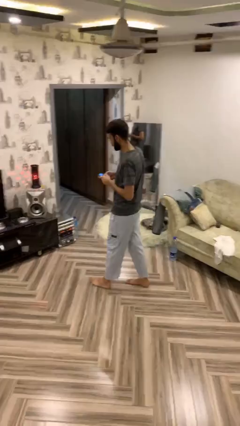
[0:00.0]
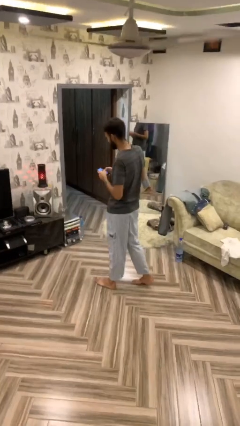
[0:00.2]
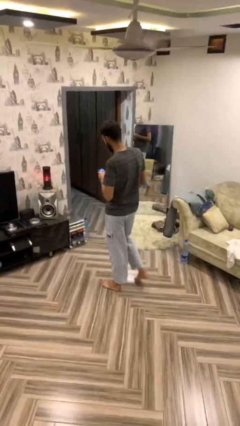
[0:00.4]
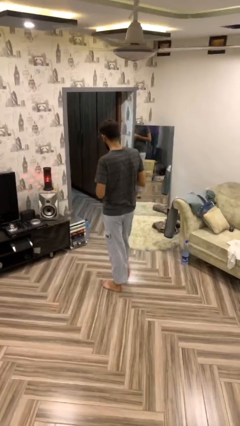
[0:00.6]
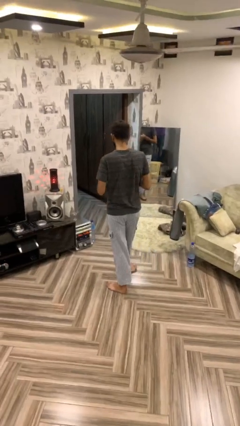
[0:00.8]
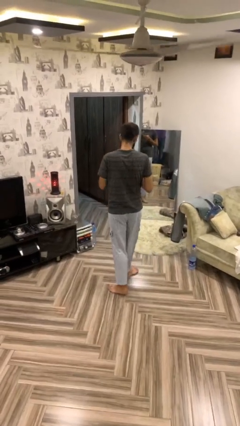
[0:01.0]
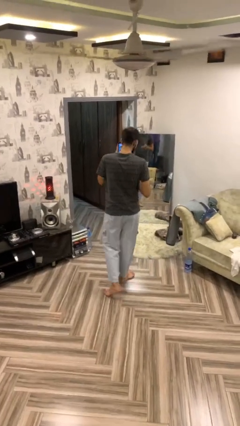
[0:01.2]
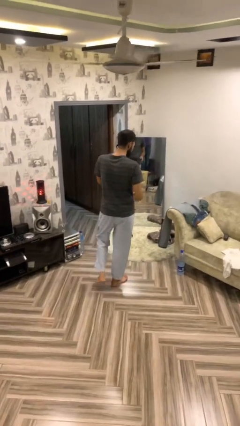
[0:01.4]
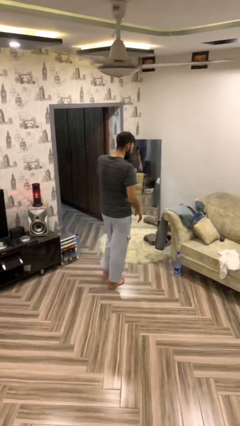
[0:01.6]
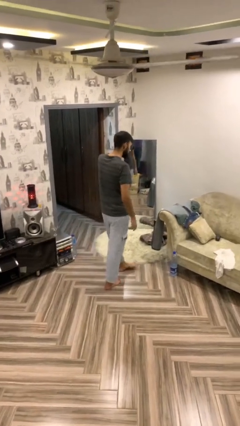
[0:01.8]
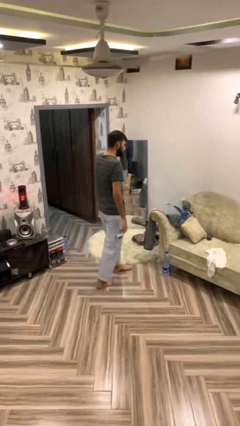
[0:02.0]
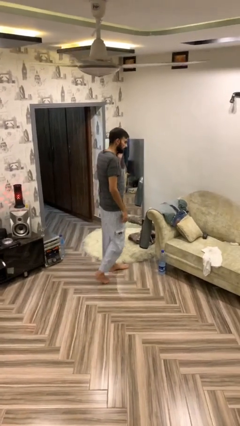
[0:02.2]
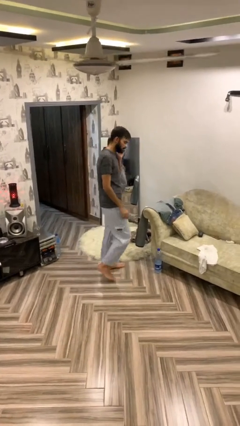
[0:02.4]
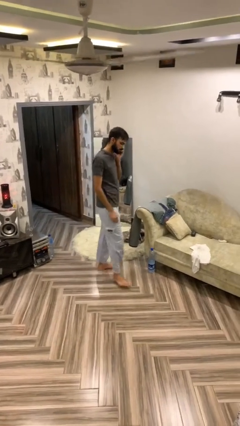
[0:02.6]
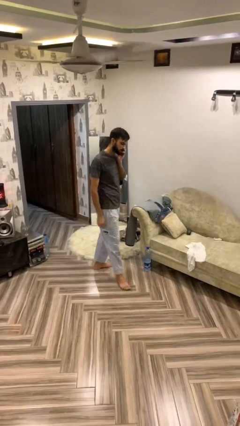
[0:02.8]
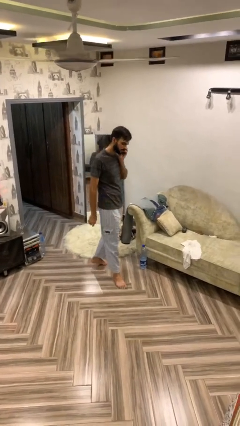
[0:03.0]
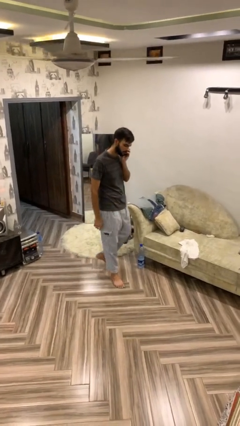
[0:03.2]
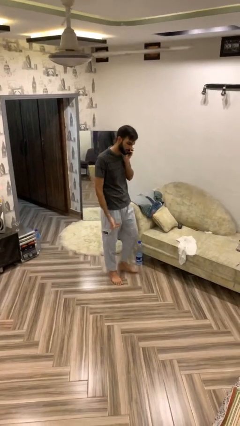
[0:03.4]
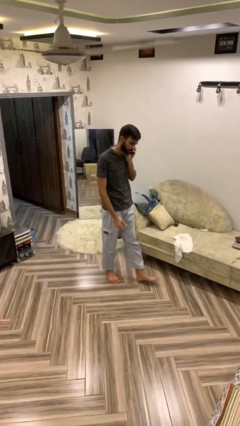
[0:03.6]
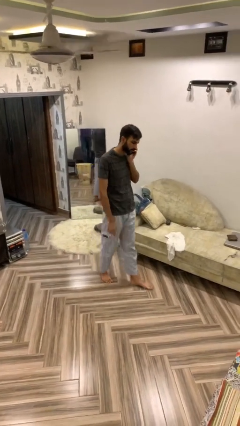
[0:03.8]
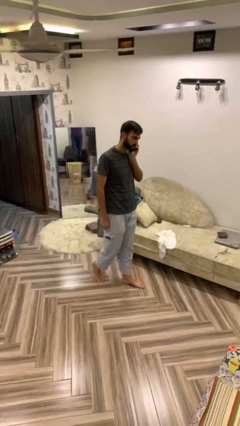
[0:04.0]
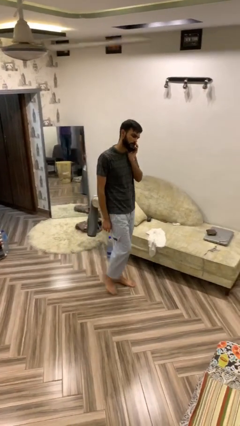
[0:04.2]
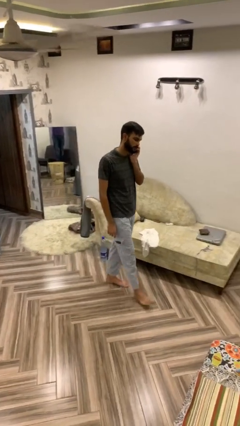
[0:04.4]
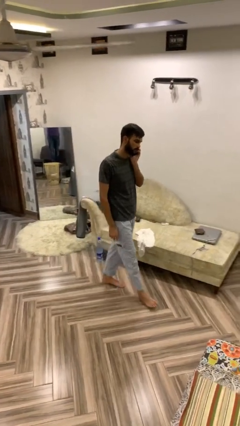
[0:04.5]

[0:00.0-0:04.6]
person talks on phone

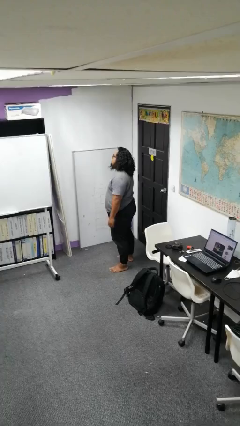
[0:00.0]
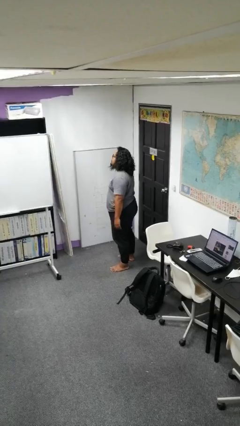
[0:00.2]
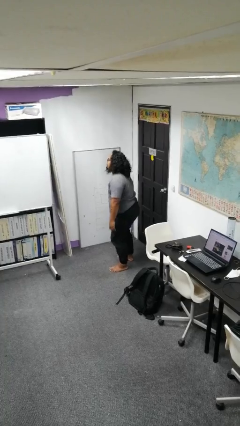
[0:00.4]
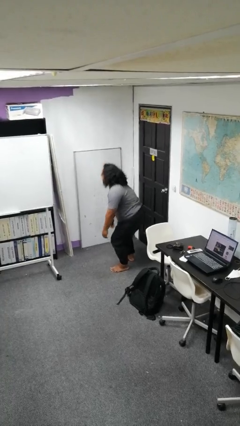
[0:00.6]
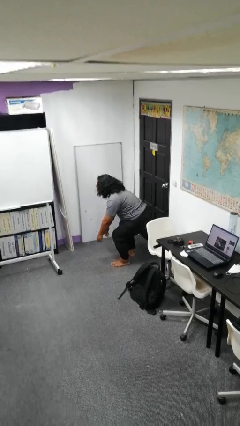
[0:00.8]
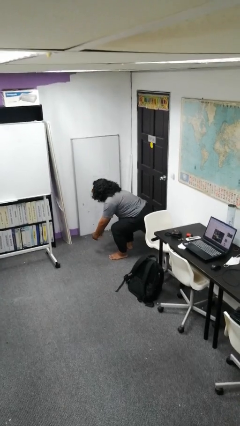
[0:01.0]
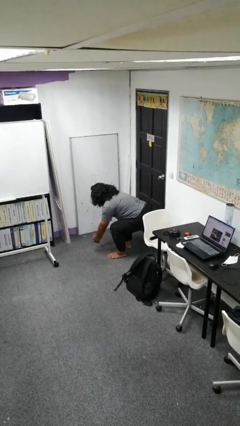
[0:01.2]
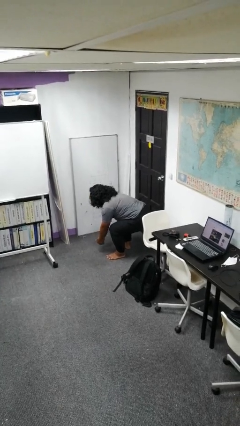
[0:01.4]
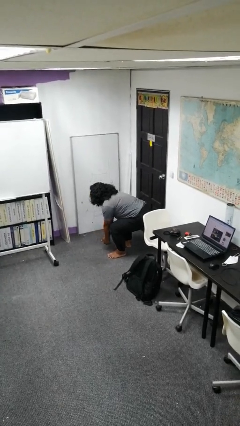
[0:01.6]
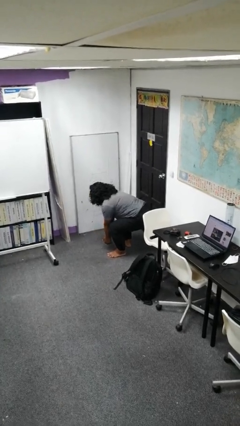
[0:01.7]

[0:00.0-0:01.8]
person squats

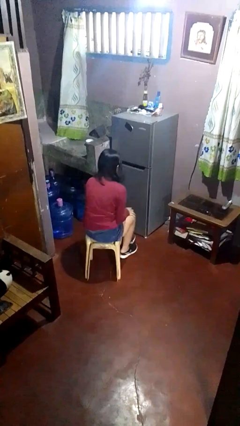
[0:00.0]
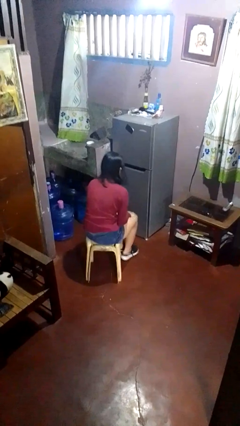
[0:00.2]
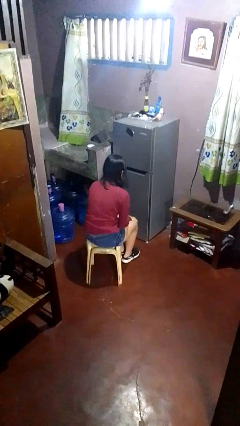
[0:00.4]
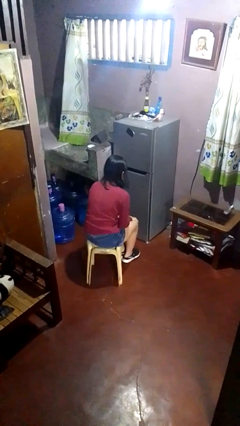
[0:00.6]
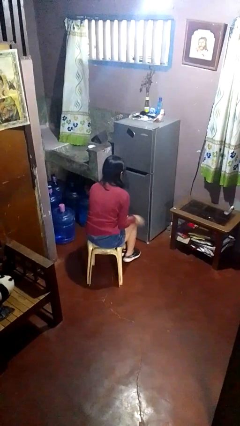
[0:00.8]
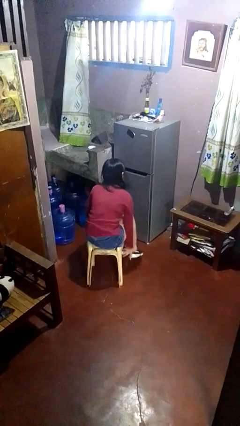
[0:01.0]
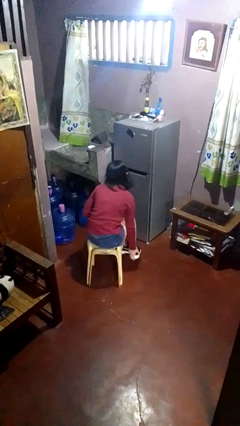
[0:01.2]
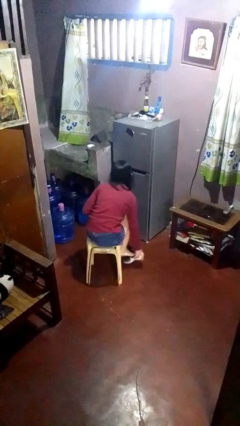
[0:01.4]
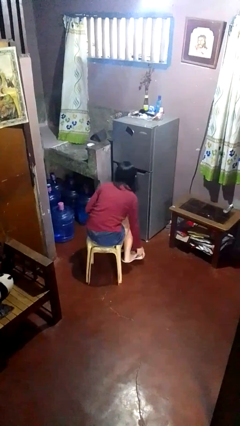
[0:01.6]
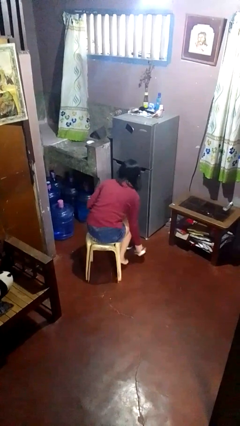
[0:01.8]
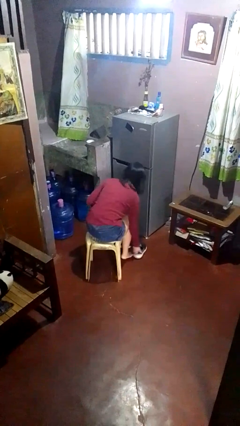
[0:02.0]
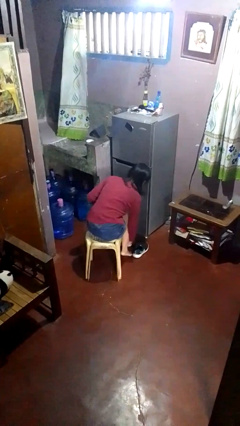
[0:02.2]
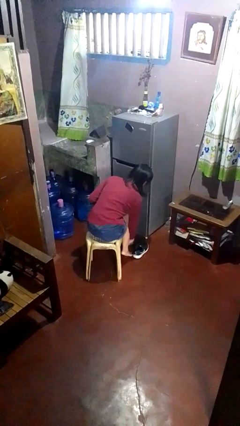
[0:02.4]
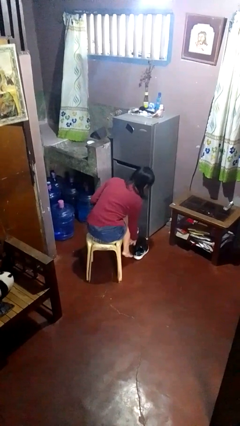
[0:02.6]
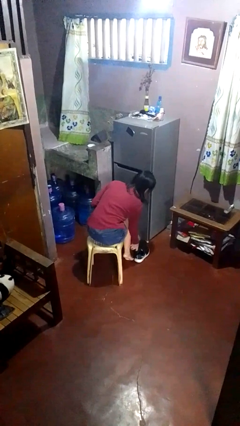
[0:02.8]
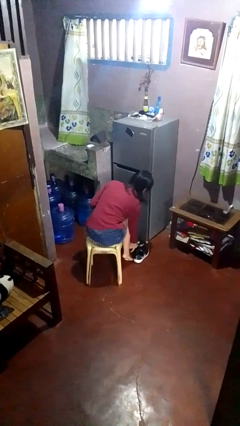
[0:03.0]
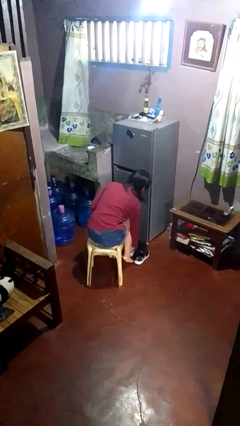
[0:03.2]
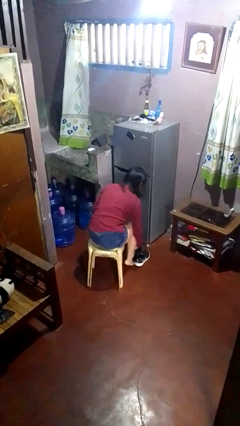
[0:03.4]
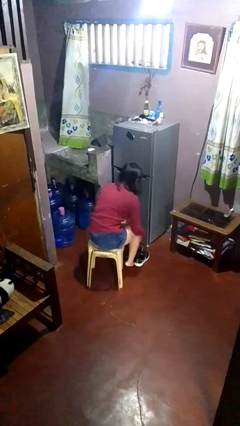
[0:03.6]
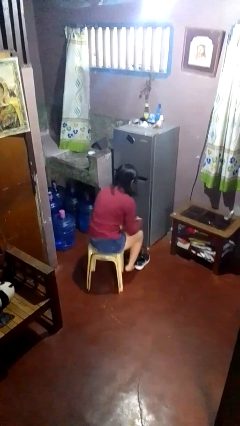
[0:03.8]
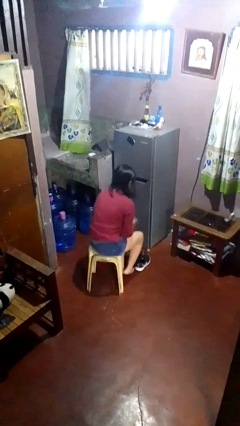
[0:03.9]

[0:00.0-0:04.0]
person takes off shoes

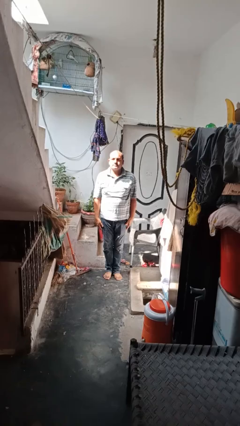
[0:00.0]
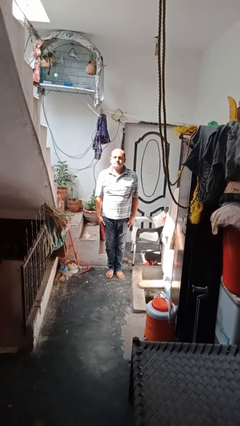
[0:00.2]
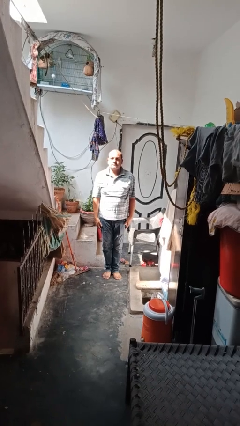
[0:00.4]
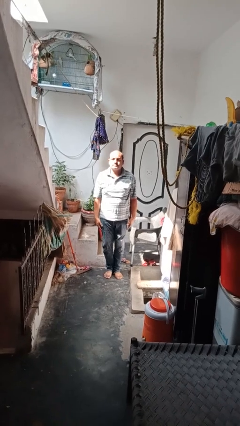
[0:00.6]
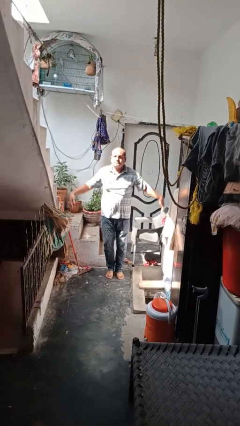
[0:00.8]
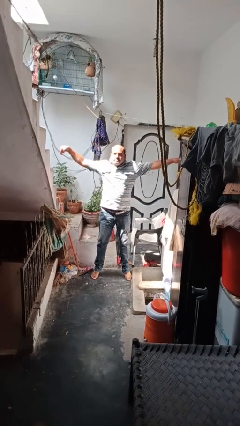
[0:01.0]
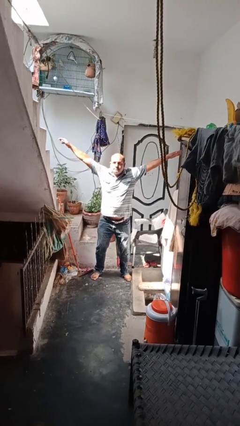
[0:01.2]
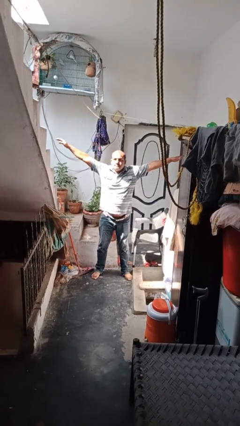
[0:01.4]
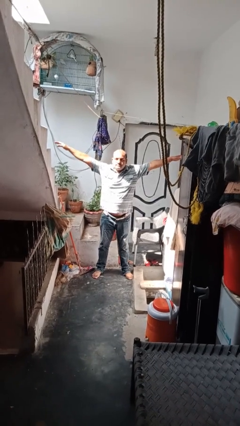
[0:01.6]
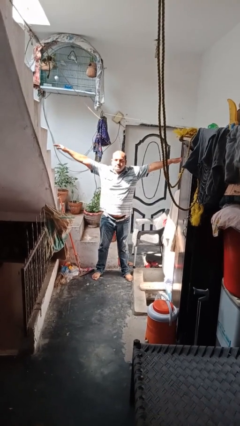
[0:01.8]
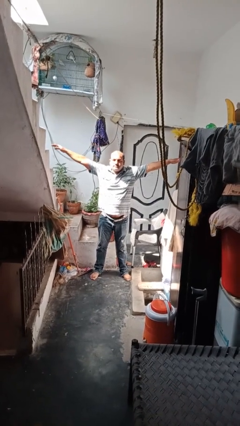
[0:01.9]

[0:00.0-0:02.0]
person exercises with jumping jacks

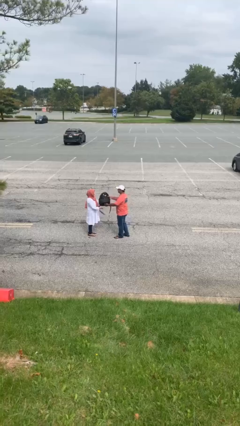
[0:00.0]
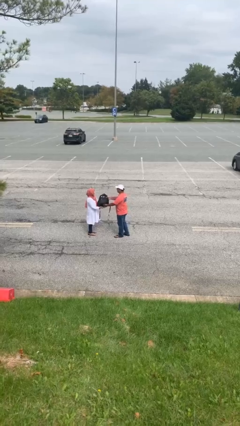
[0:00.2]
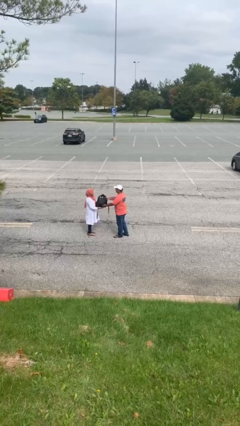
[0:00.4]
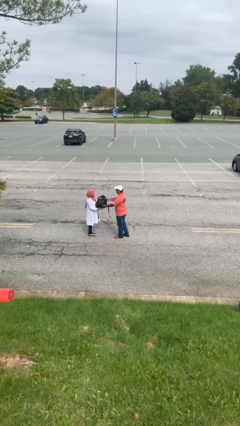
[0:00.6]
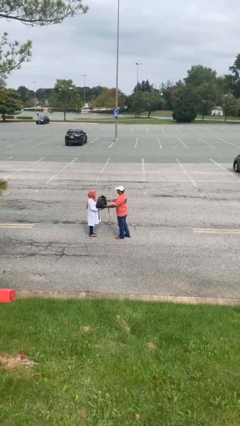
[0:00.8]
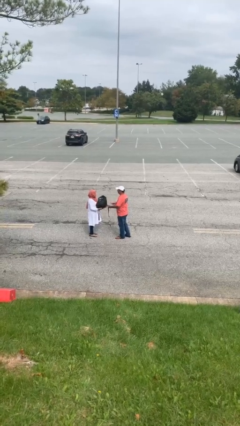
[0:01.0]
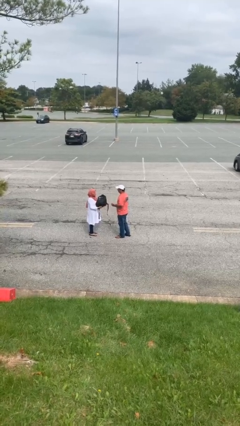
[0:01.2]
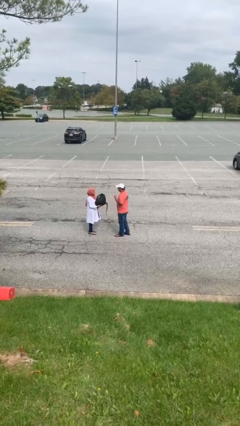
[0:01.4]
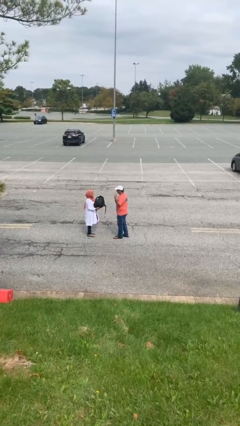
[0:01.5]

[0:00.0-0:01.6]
person transfers object to person

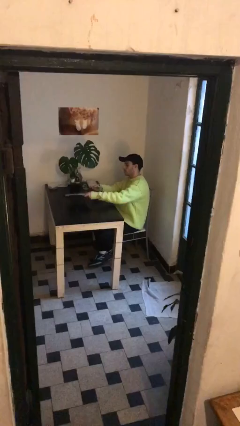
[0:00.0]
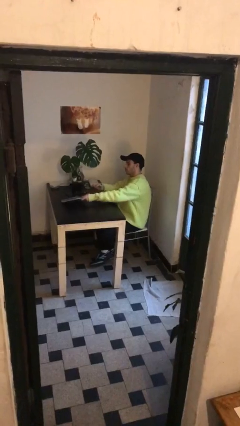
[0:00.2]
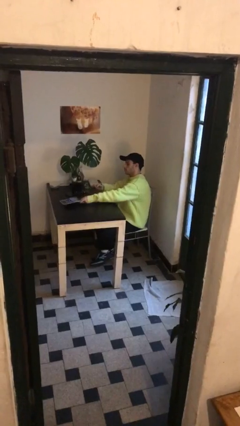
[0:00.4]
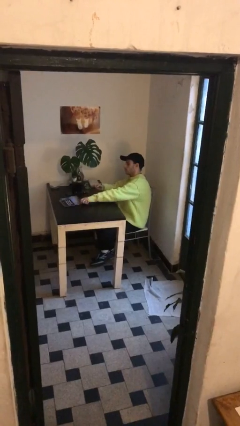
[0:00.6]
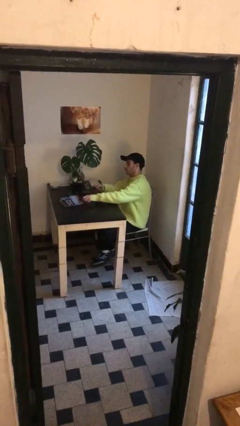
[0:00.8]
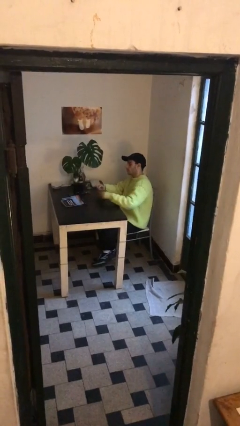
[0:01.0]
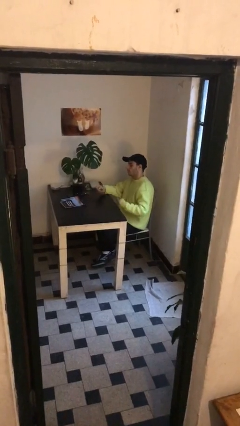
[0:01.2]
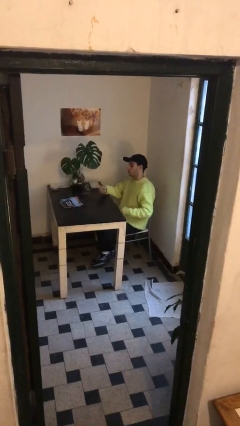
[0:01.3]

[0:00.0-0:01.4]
person puts down object on table

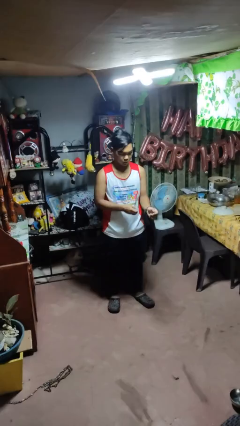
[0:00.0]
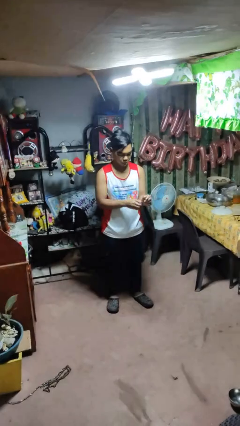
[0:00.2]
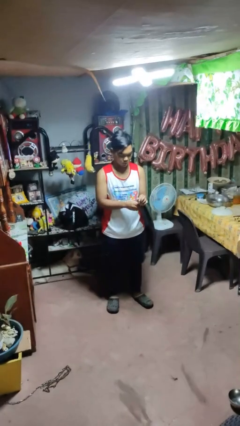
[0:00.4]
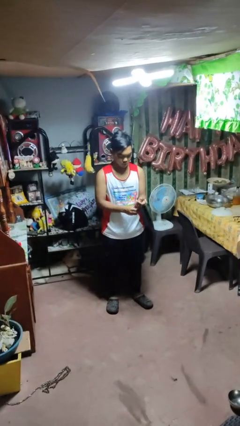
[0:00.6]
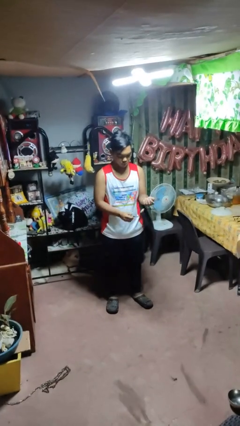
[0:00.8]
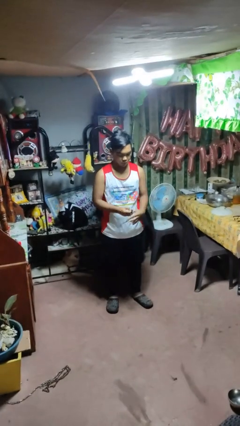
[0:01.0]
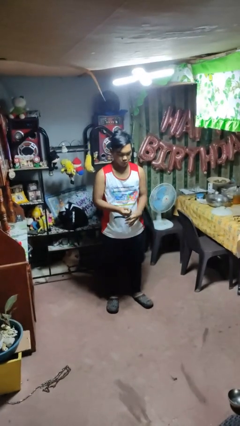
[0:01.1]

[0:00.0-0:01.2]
person takes off wristwatch

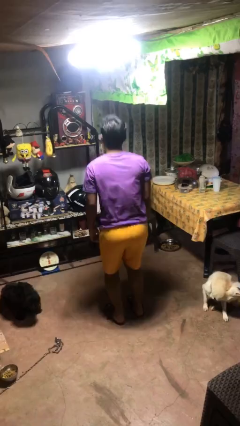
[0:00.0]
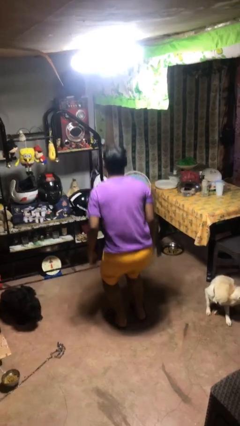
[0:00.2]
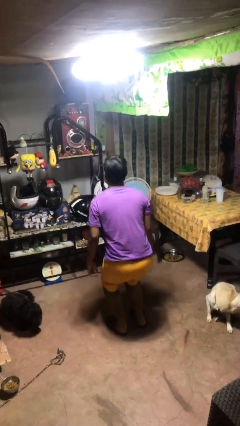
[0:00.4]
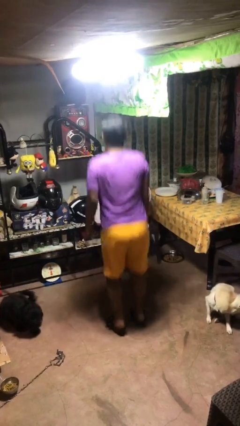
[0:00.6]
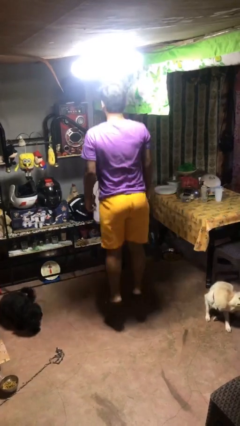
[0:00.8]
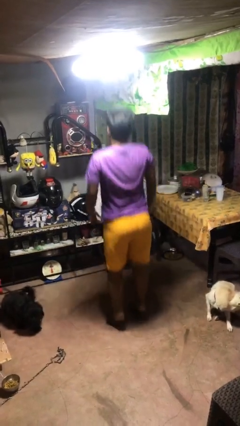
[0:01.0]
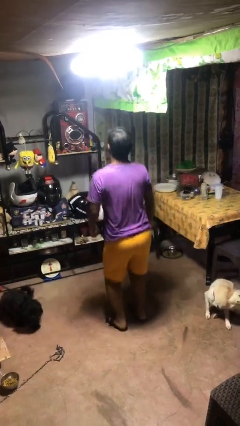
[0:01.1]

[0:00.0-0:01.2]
person jumps
